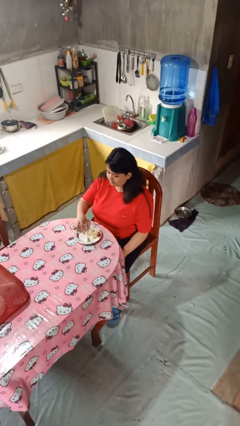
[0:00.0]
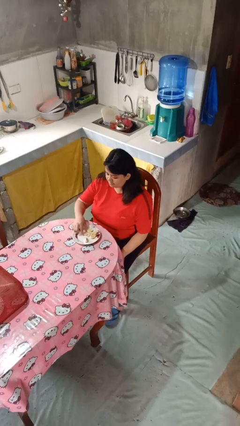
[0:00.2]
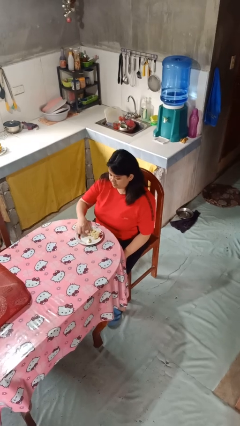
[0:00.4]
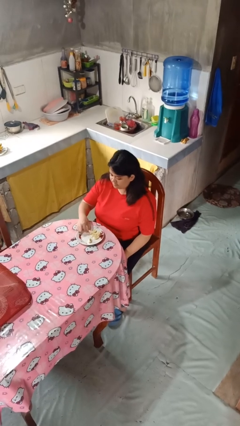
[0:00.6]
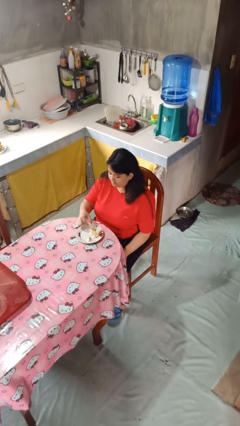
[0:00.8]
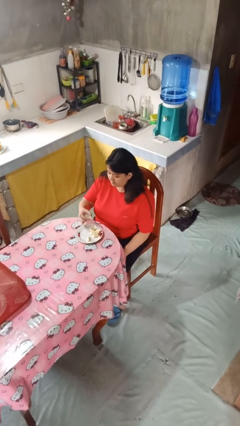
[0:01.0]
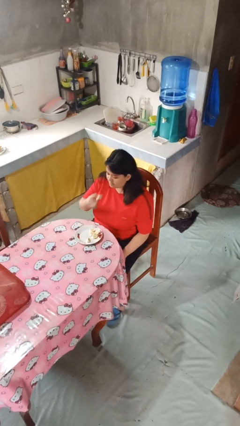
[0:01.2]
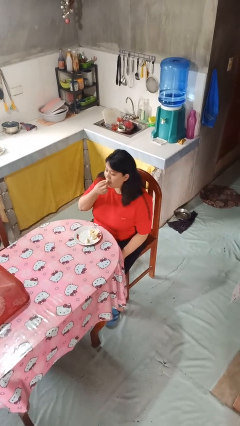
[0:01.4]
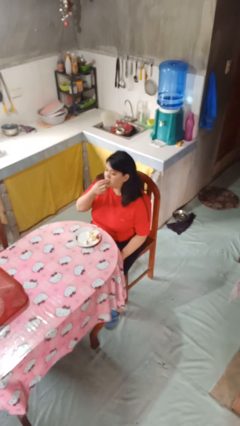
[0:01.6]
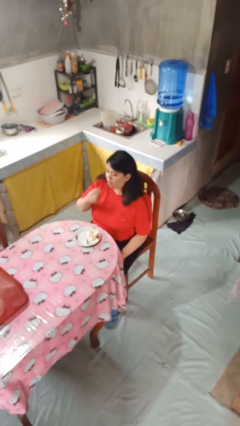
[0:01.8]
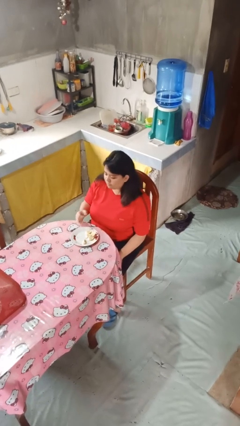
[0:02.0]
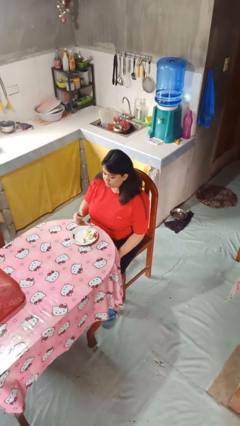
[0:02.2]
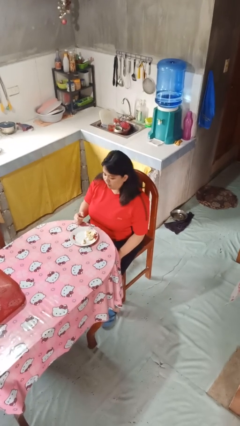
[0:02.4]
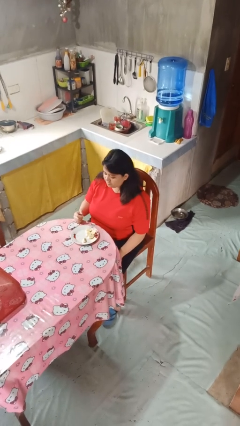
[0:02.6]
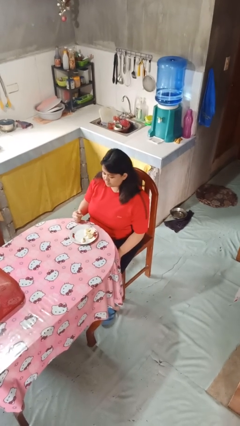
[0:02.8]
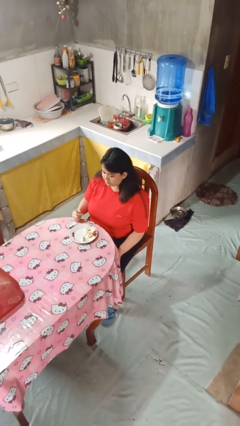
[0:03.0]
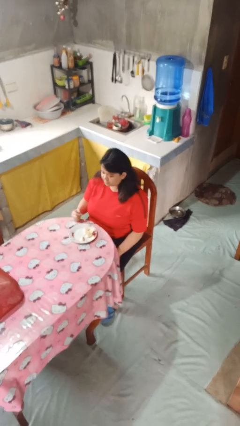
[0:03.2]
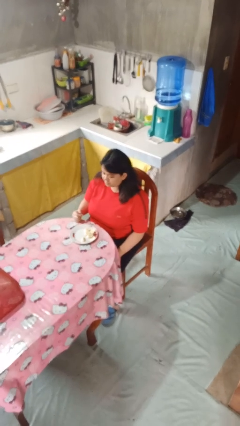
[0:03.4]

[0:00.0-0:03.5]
person eats with hands

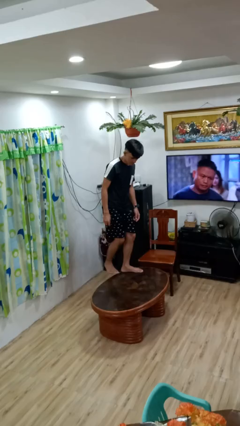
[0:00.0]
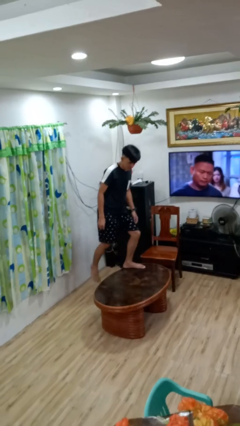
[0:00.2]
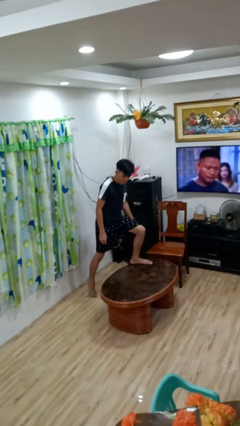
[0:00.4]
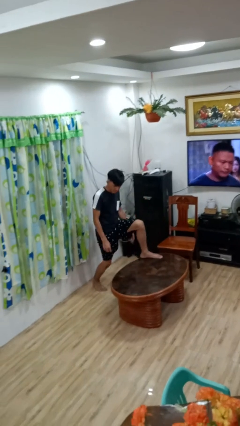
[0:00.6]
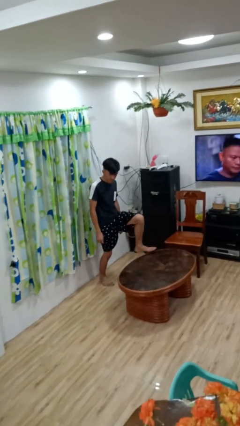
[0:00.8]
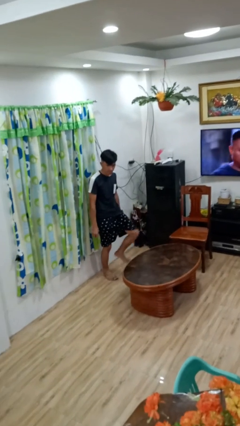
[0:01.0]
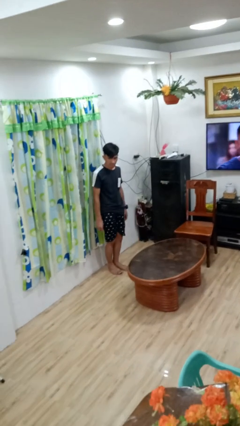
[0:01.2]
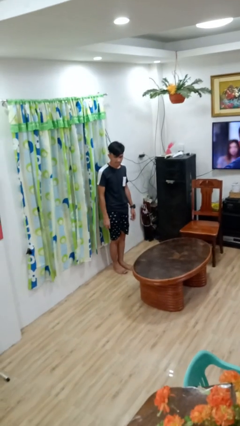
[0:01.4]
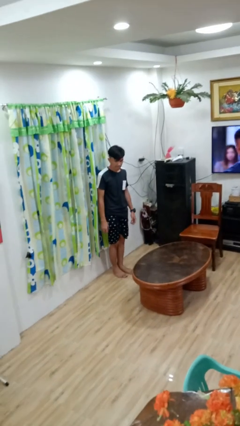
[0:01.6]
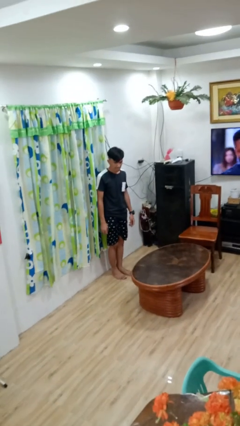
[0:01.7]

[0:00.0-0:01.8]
person climbs off table

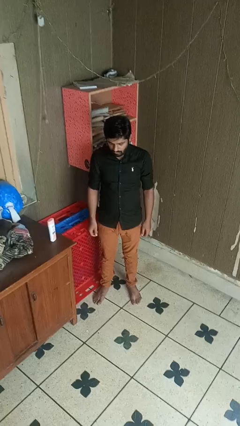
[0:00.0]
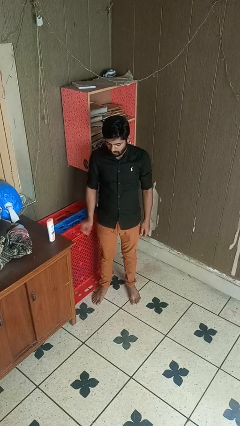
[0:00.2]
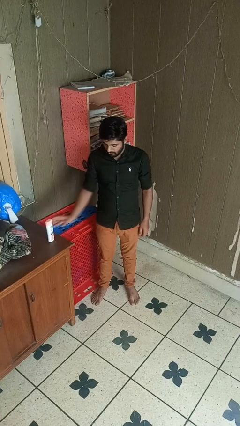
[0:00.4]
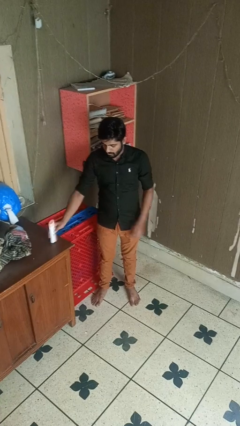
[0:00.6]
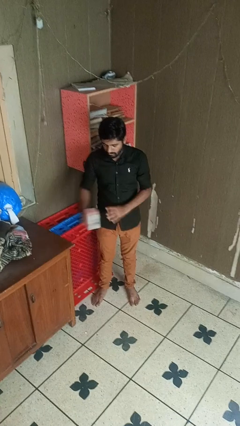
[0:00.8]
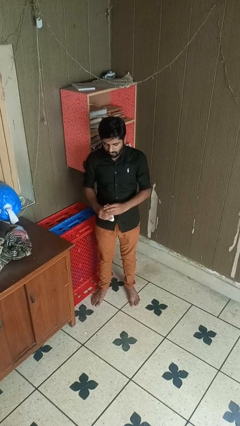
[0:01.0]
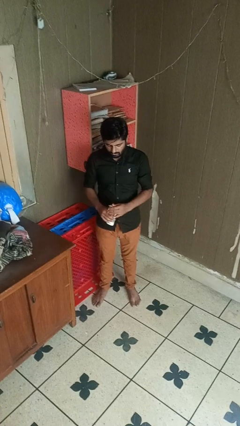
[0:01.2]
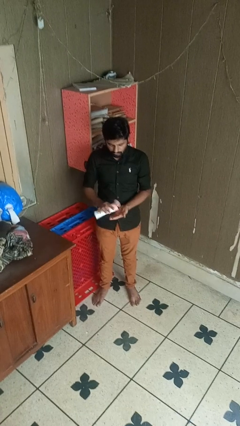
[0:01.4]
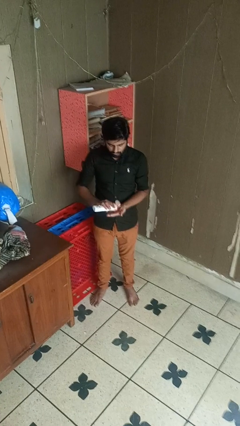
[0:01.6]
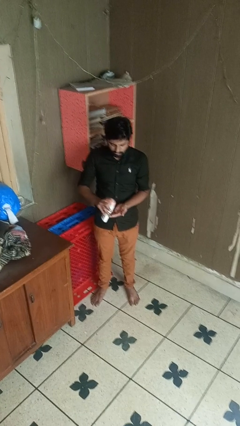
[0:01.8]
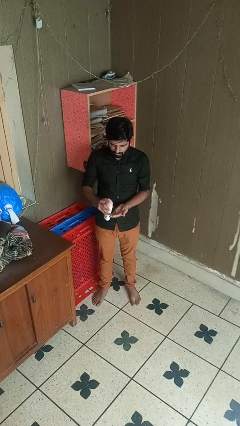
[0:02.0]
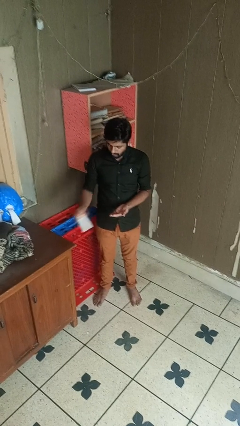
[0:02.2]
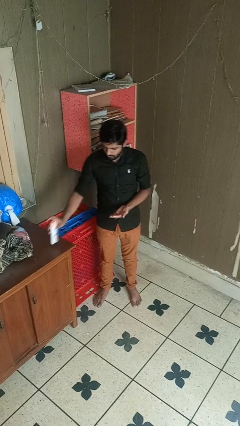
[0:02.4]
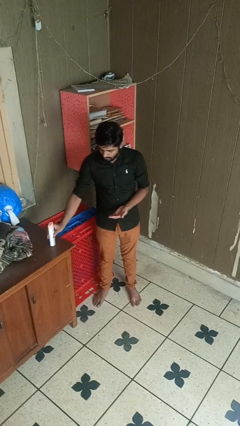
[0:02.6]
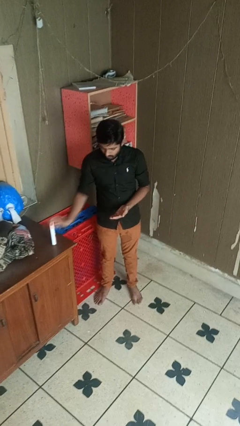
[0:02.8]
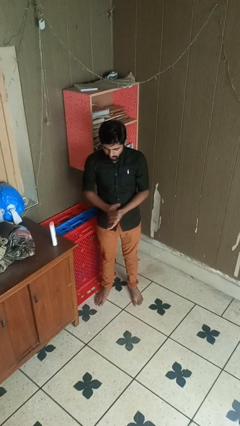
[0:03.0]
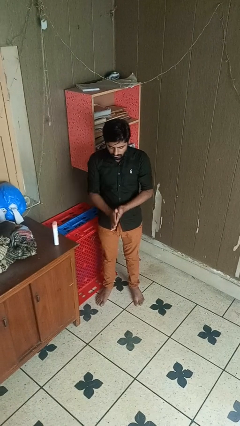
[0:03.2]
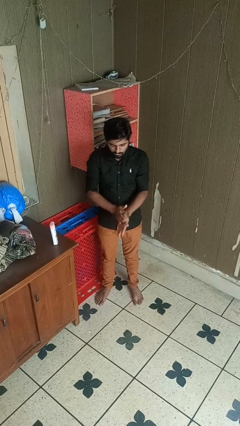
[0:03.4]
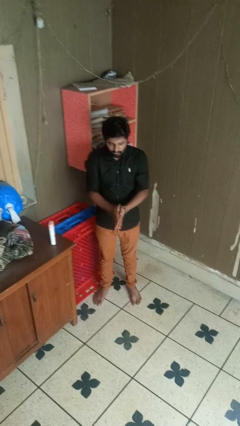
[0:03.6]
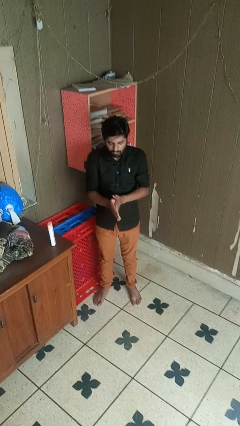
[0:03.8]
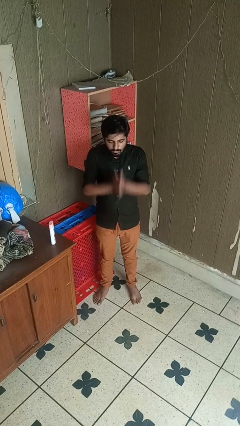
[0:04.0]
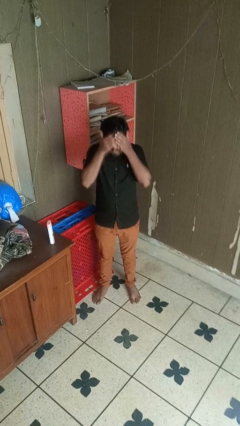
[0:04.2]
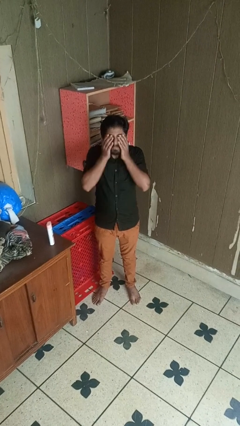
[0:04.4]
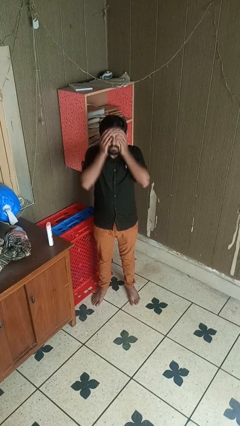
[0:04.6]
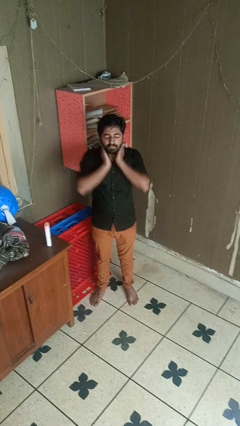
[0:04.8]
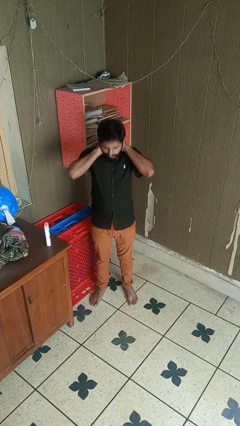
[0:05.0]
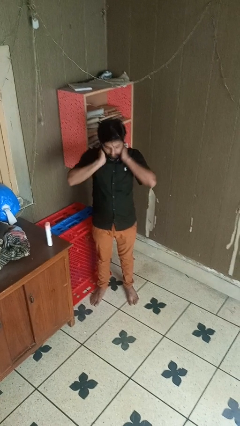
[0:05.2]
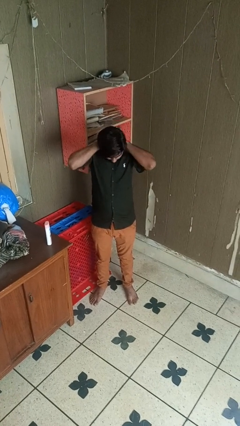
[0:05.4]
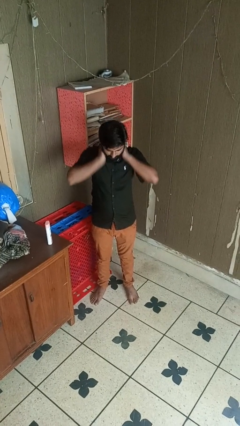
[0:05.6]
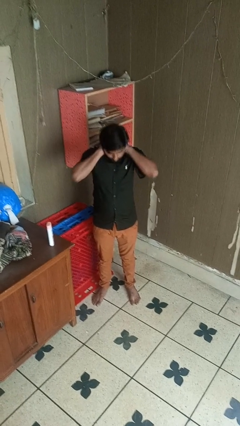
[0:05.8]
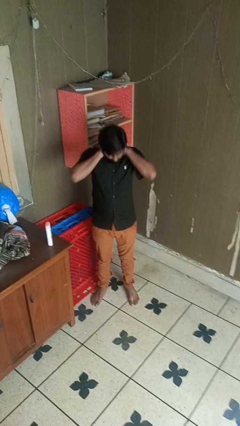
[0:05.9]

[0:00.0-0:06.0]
person applies facial moisturizer

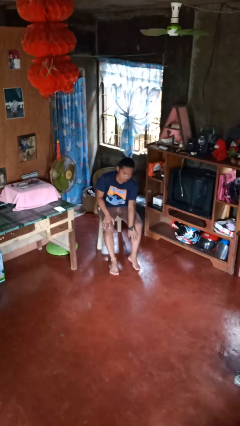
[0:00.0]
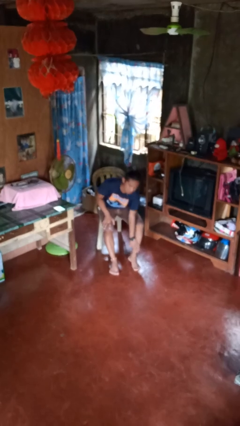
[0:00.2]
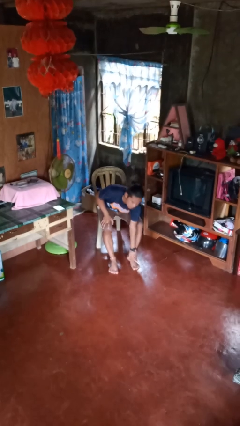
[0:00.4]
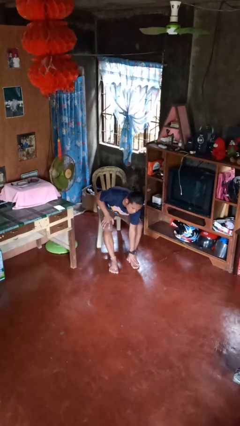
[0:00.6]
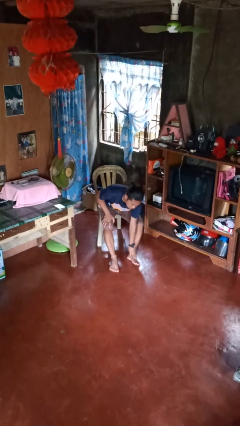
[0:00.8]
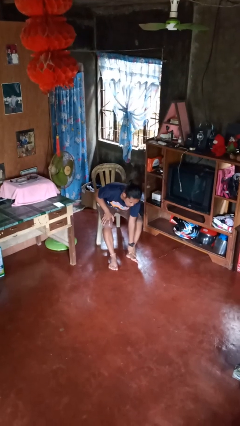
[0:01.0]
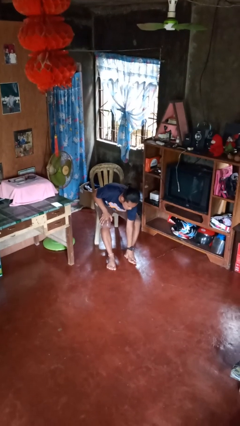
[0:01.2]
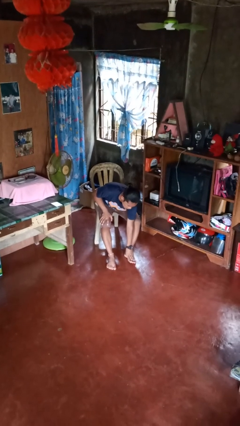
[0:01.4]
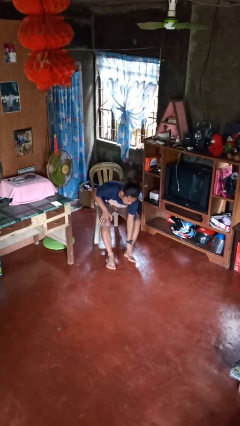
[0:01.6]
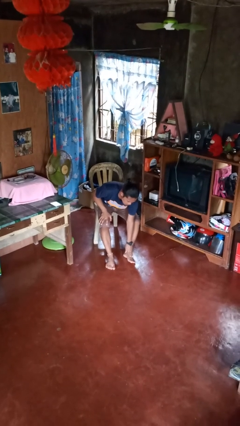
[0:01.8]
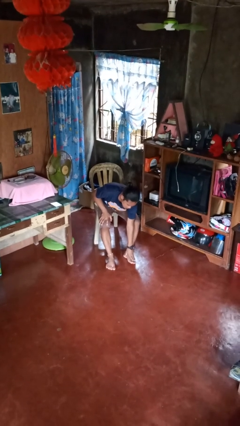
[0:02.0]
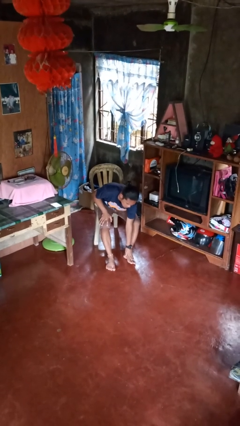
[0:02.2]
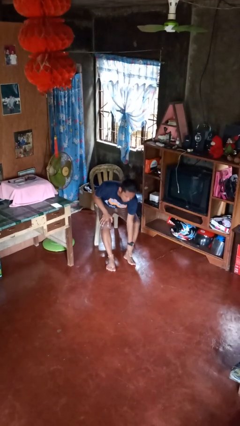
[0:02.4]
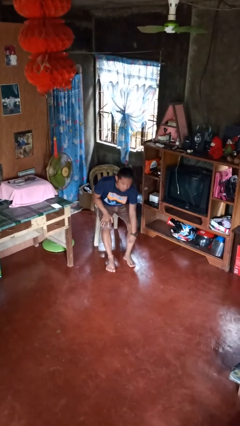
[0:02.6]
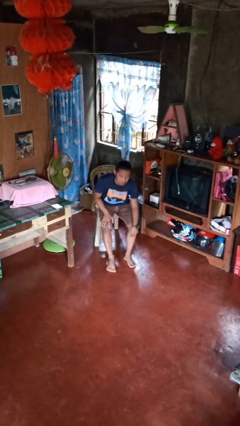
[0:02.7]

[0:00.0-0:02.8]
person rubs foot

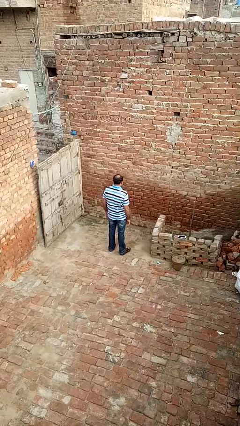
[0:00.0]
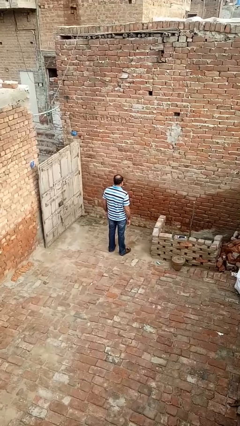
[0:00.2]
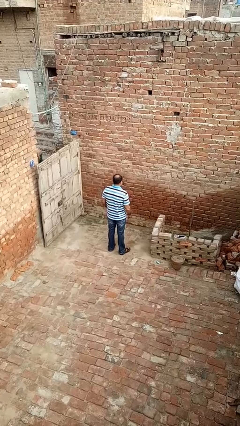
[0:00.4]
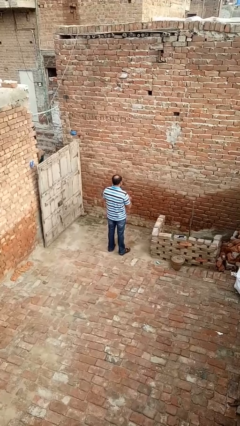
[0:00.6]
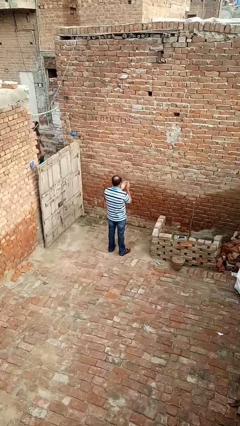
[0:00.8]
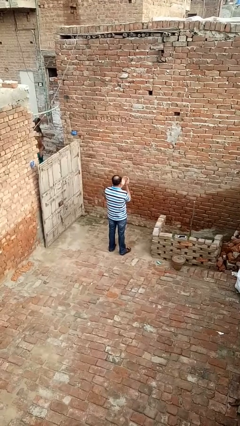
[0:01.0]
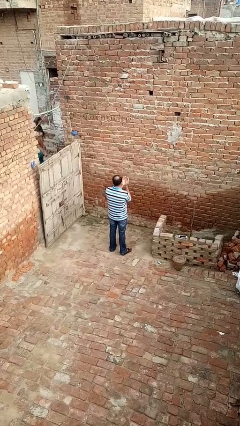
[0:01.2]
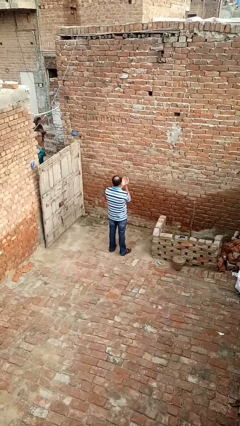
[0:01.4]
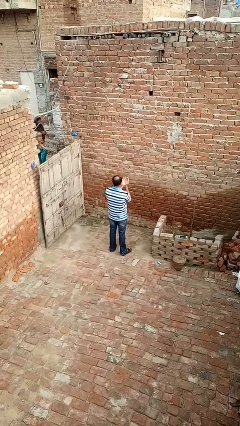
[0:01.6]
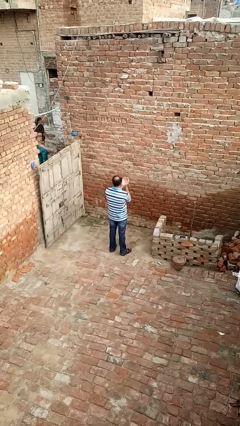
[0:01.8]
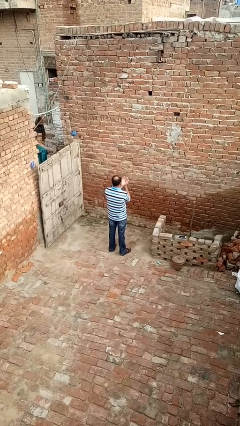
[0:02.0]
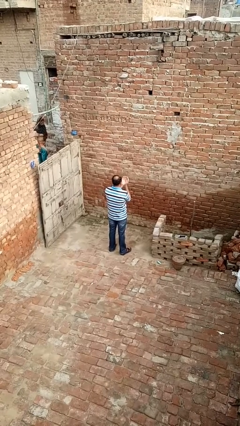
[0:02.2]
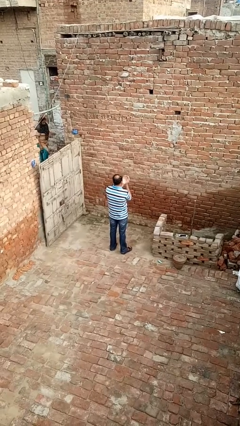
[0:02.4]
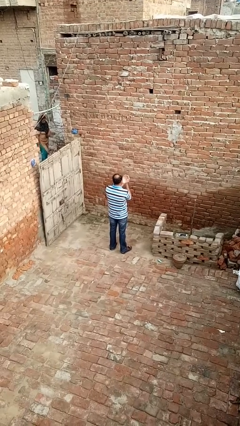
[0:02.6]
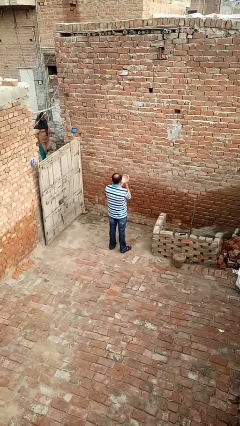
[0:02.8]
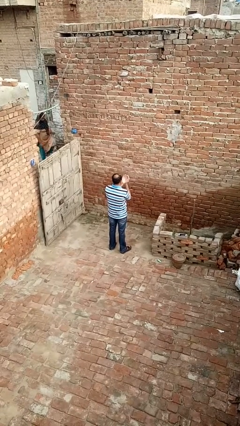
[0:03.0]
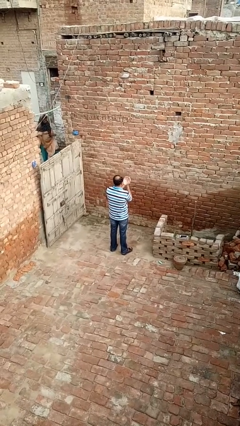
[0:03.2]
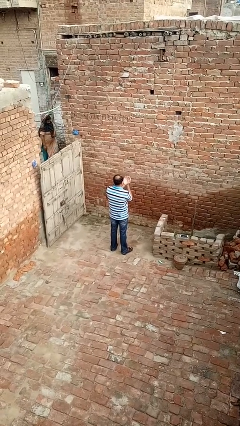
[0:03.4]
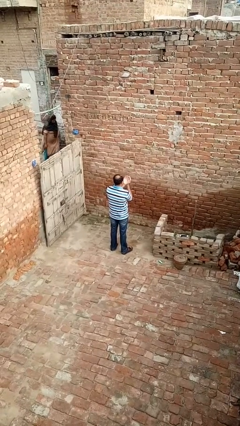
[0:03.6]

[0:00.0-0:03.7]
person prays
